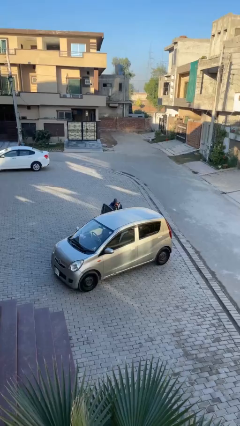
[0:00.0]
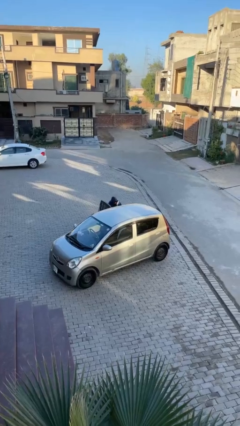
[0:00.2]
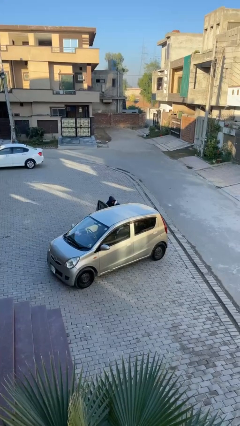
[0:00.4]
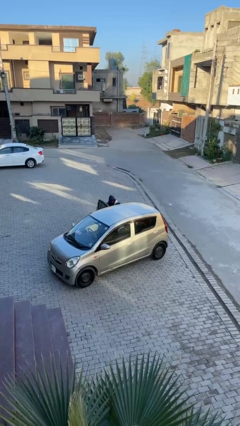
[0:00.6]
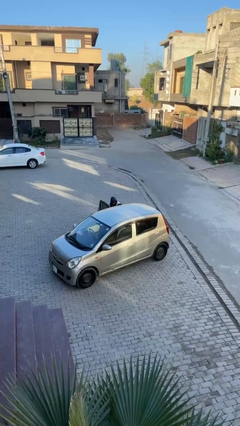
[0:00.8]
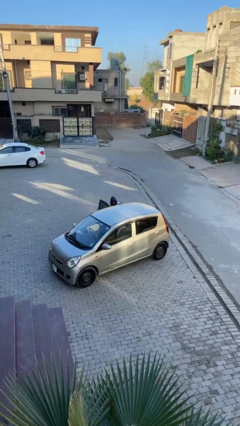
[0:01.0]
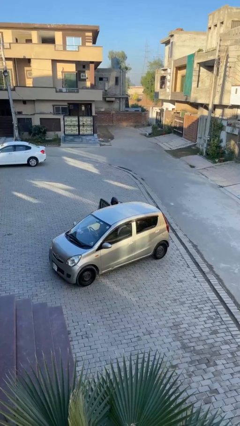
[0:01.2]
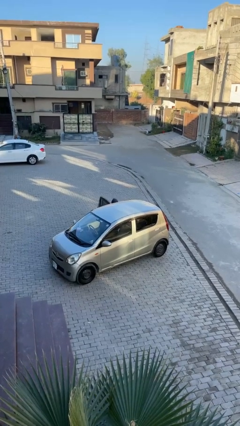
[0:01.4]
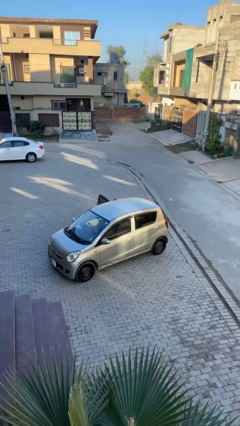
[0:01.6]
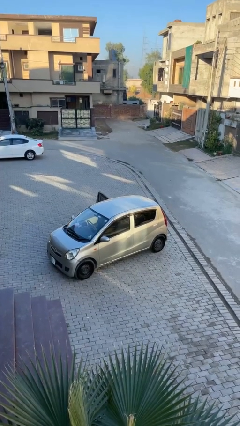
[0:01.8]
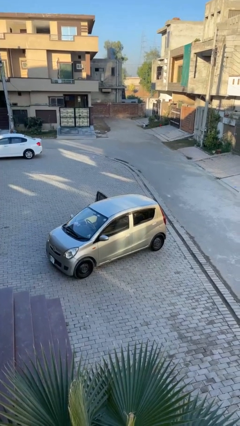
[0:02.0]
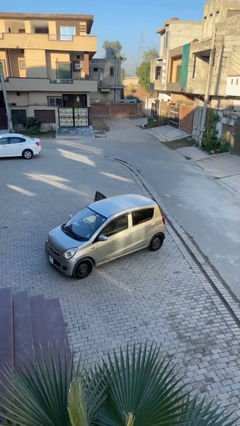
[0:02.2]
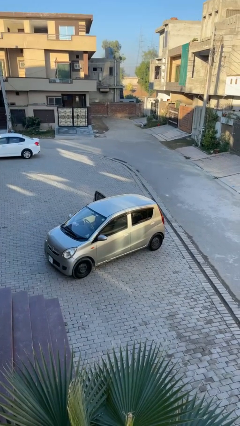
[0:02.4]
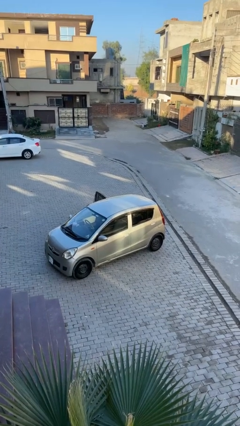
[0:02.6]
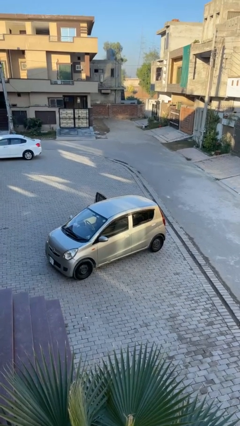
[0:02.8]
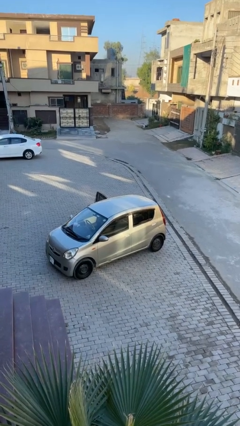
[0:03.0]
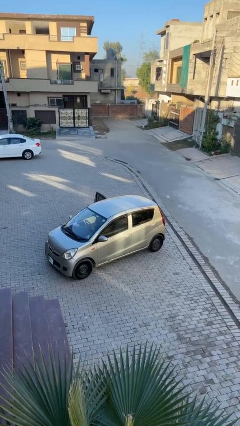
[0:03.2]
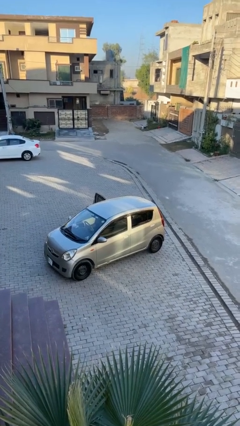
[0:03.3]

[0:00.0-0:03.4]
person enters car

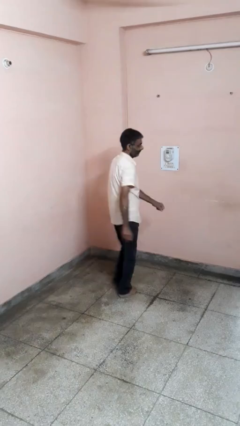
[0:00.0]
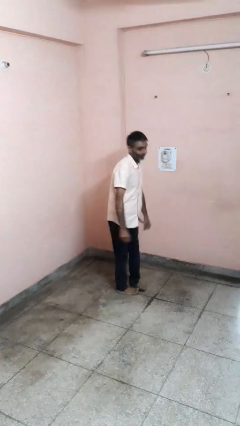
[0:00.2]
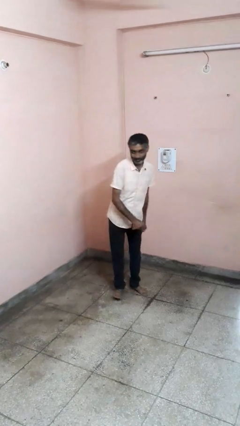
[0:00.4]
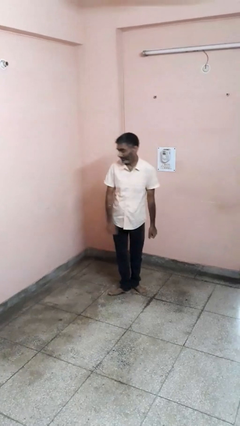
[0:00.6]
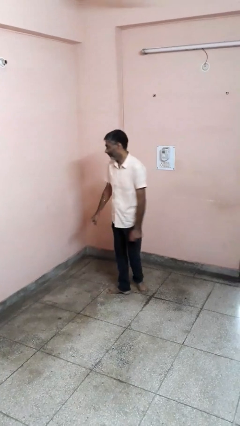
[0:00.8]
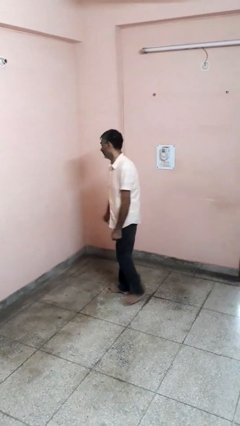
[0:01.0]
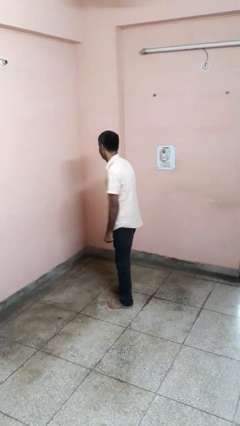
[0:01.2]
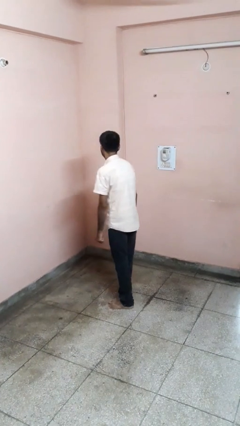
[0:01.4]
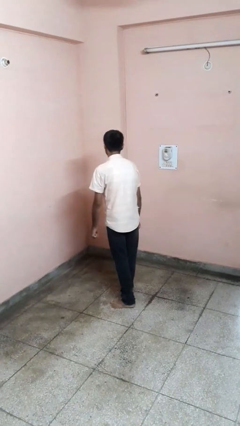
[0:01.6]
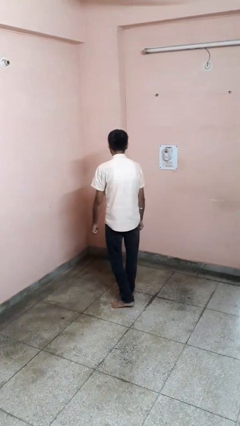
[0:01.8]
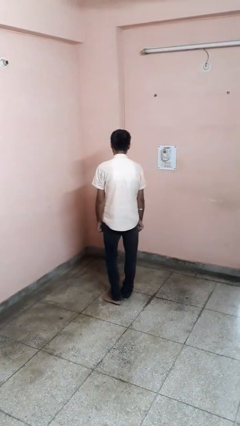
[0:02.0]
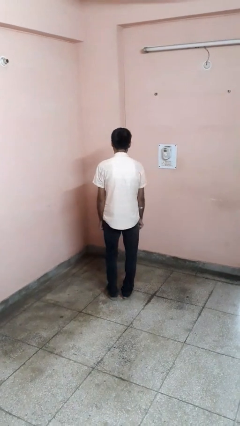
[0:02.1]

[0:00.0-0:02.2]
person twirls

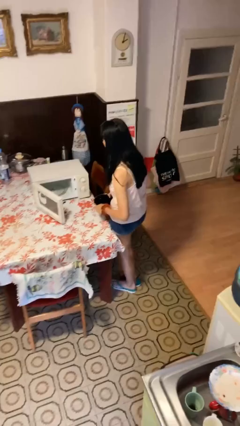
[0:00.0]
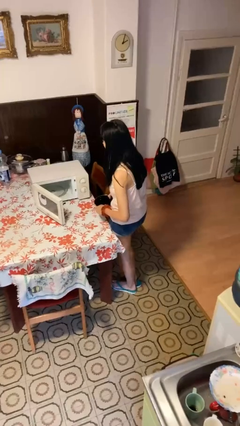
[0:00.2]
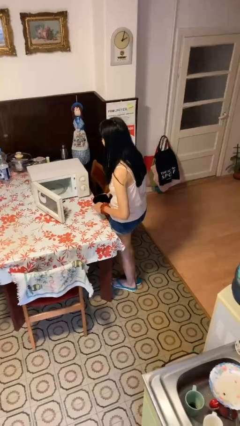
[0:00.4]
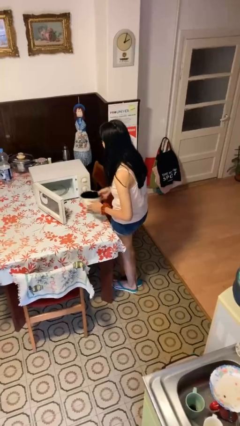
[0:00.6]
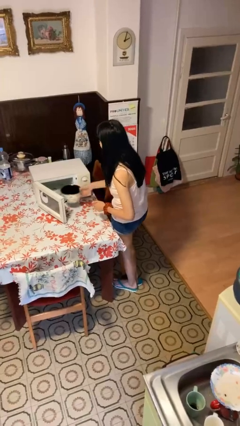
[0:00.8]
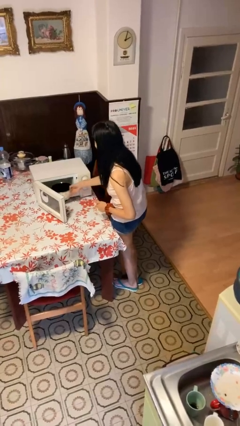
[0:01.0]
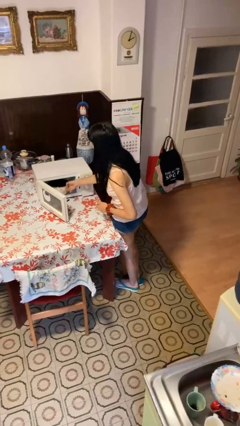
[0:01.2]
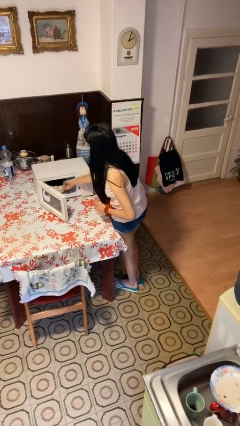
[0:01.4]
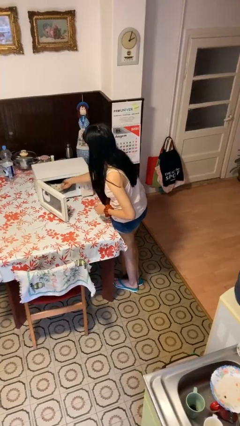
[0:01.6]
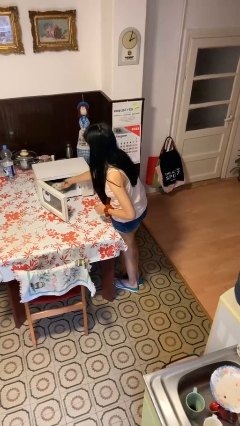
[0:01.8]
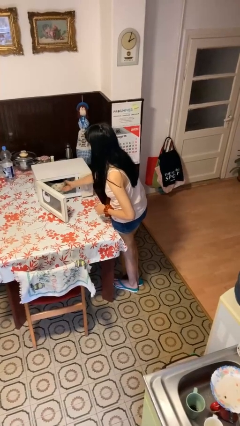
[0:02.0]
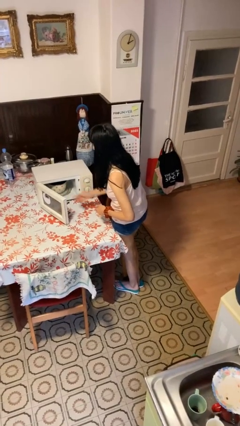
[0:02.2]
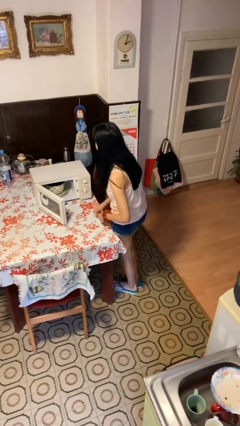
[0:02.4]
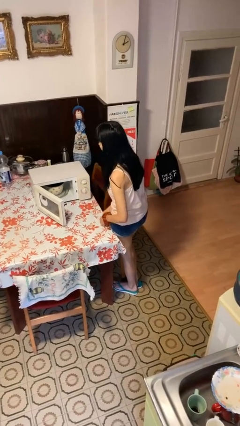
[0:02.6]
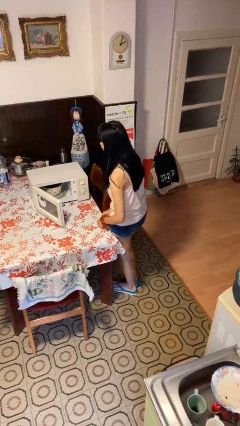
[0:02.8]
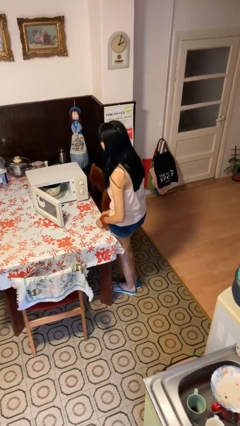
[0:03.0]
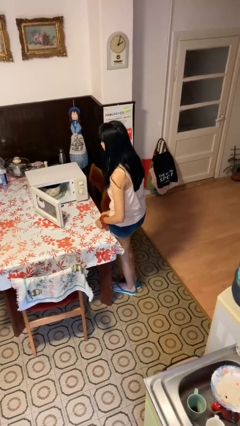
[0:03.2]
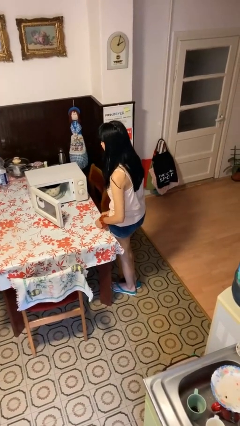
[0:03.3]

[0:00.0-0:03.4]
person puts object into microwave

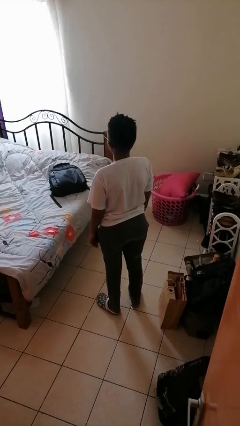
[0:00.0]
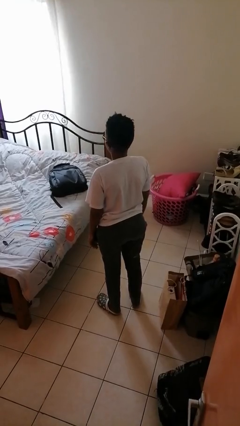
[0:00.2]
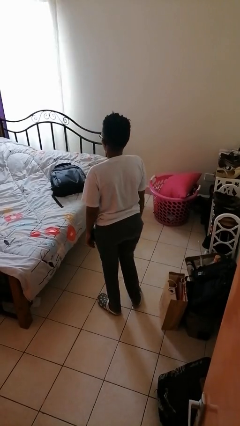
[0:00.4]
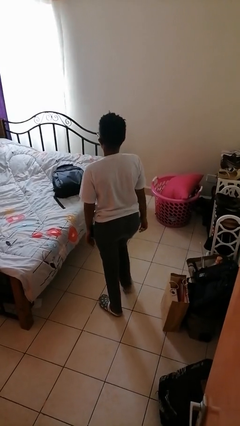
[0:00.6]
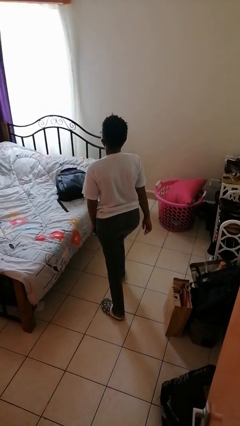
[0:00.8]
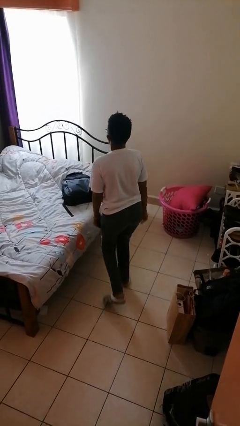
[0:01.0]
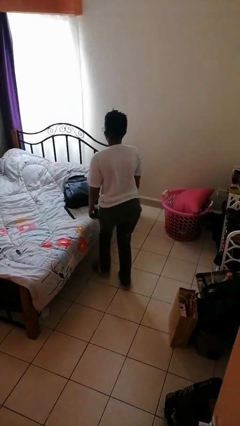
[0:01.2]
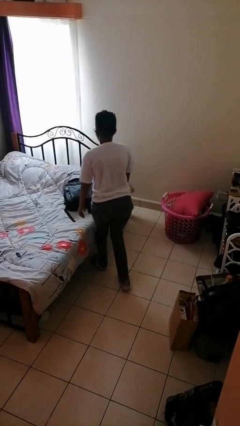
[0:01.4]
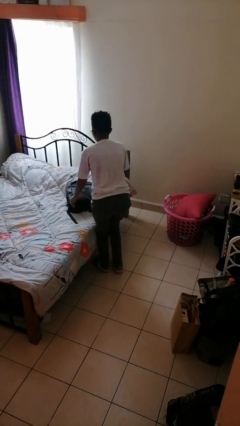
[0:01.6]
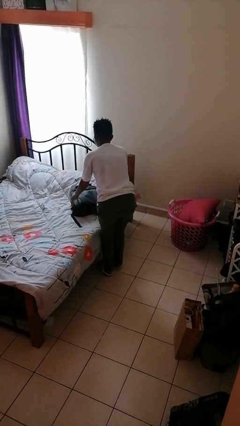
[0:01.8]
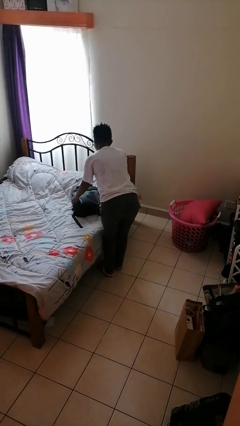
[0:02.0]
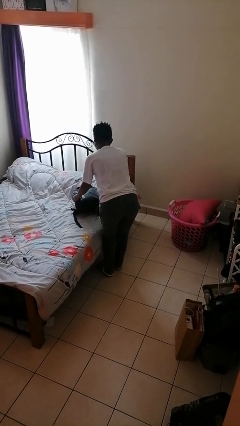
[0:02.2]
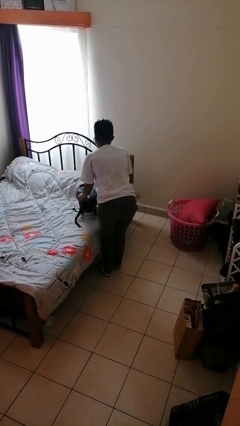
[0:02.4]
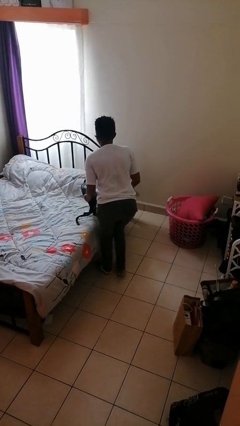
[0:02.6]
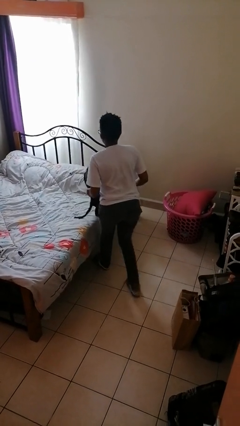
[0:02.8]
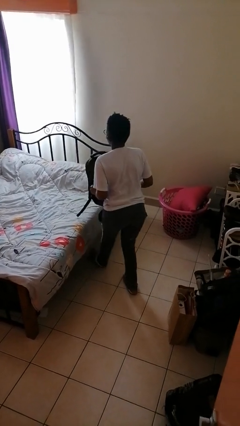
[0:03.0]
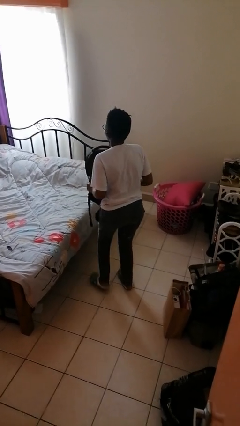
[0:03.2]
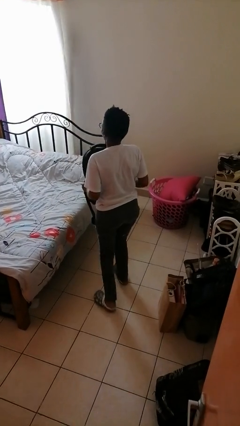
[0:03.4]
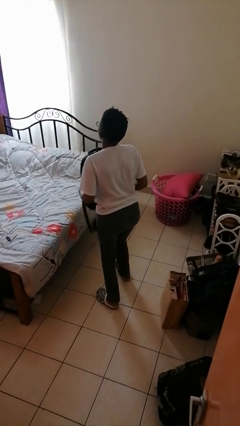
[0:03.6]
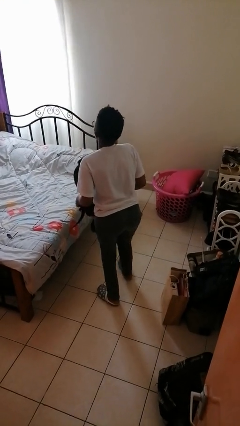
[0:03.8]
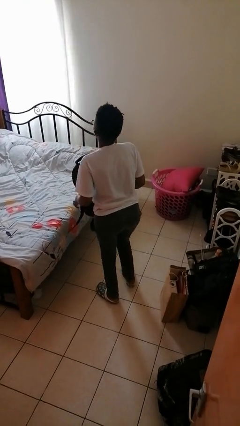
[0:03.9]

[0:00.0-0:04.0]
person picks up object from bed

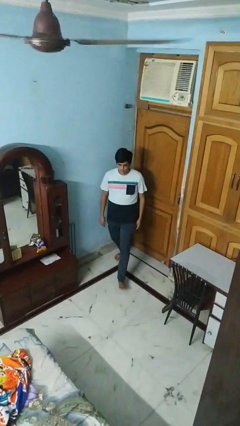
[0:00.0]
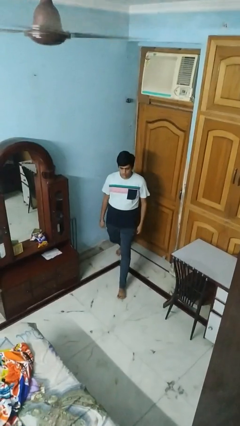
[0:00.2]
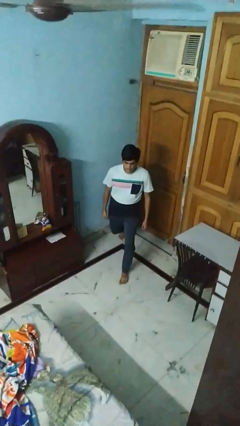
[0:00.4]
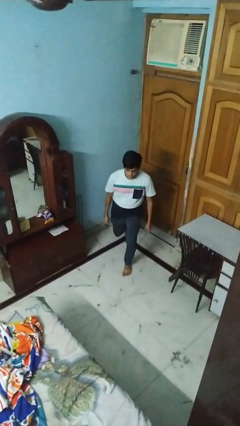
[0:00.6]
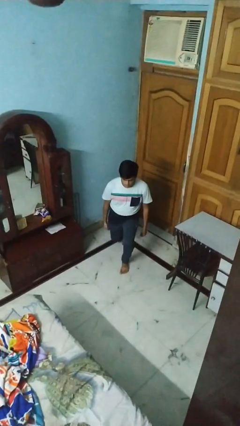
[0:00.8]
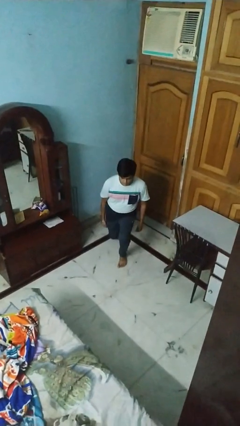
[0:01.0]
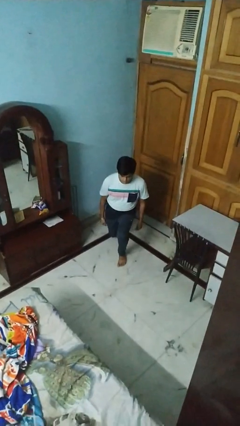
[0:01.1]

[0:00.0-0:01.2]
person exercises with lunges

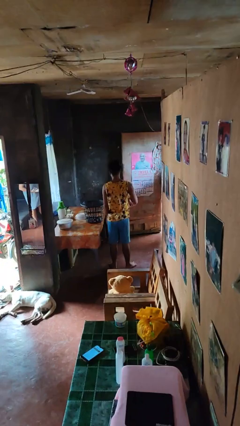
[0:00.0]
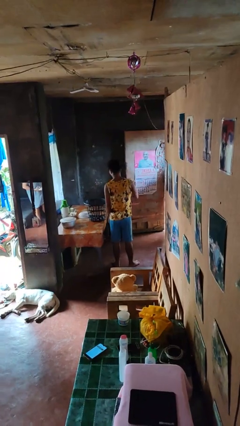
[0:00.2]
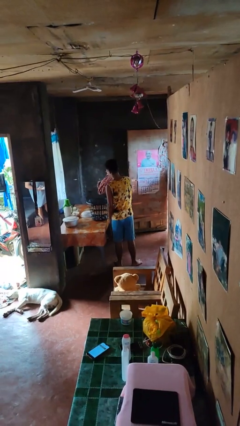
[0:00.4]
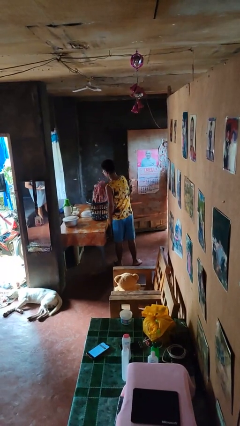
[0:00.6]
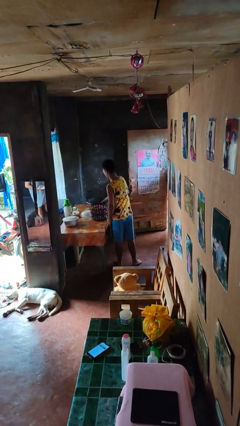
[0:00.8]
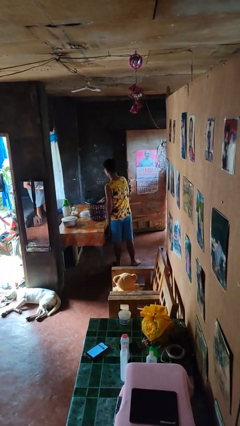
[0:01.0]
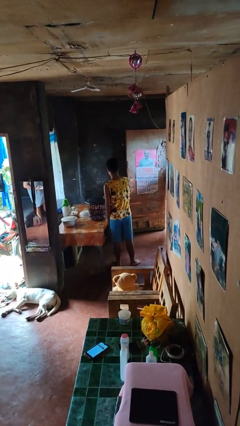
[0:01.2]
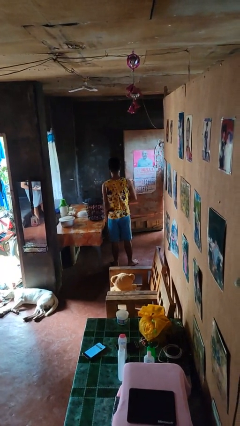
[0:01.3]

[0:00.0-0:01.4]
person puts object into basket

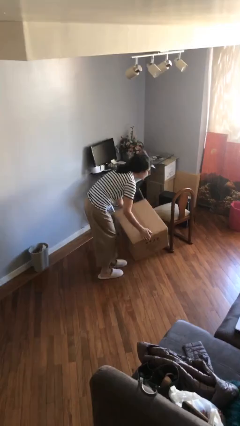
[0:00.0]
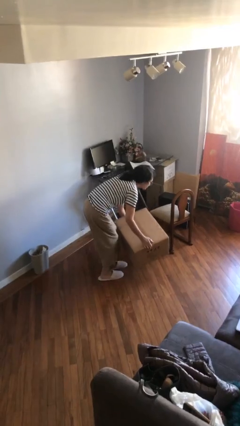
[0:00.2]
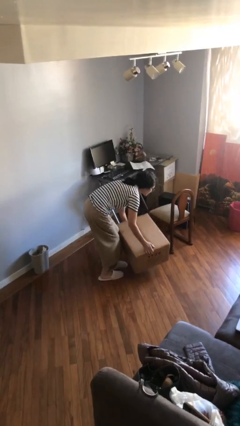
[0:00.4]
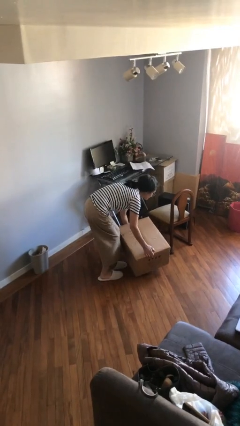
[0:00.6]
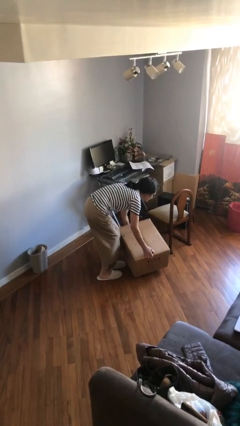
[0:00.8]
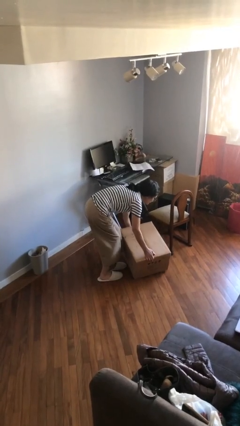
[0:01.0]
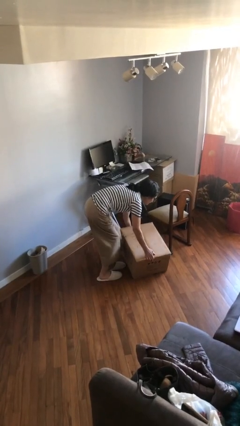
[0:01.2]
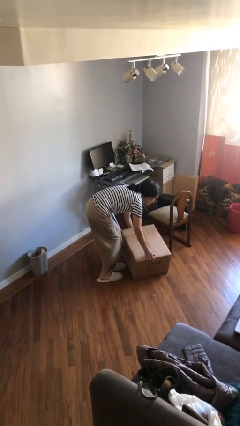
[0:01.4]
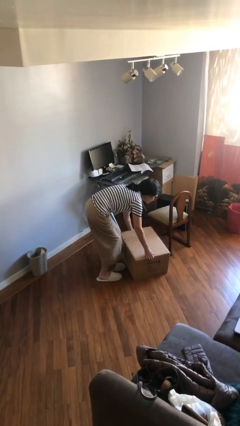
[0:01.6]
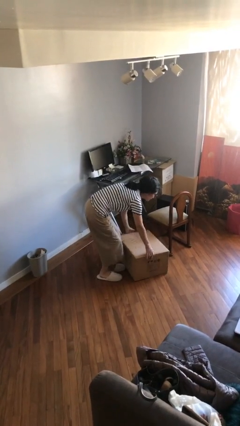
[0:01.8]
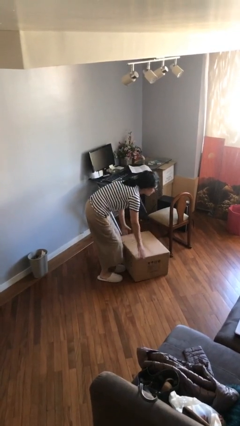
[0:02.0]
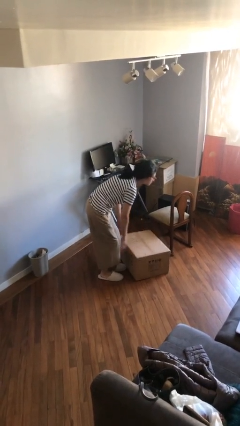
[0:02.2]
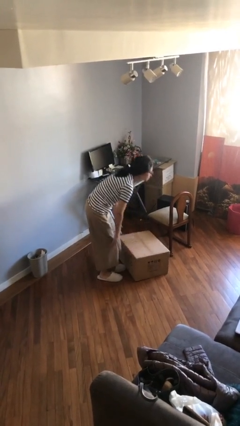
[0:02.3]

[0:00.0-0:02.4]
person puts down object on floor
